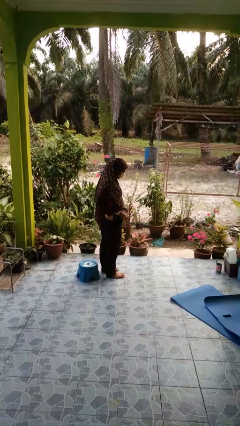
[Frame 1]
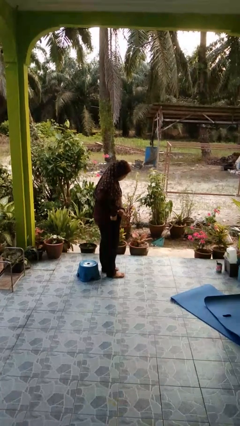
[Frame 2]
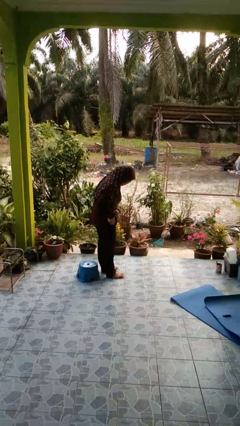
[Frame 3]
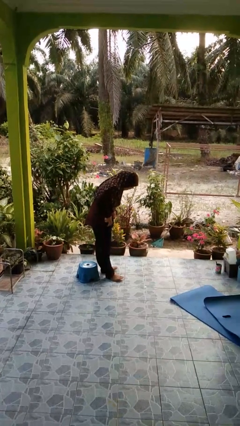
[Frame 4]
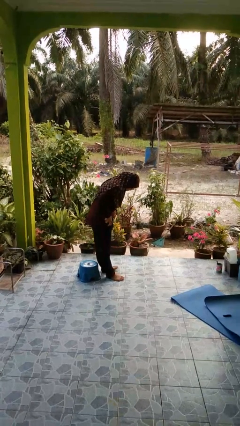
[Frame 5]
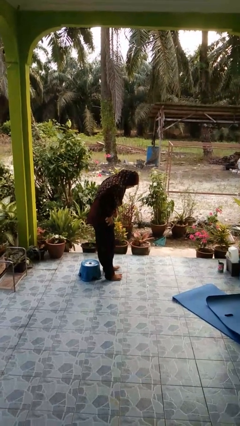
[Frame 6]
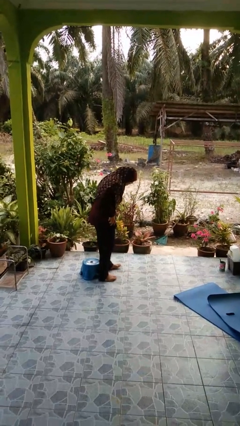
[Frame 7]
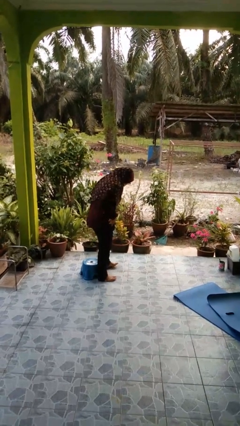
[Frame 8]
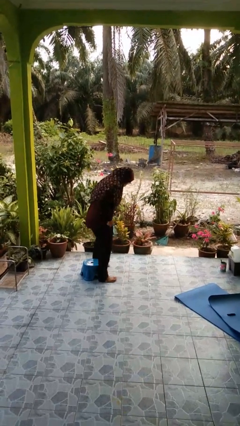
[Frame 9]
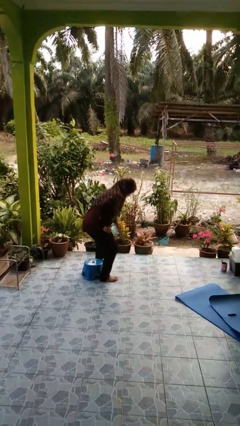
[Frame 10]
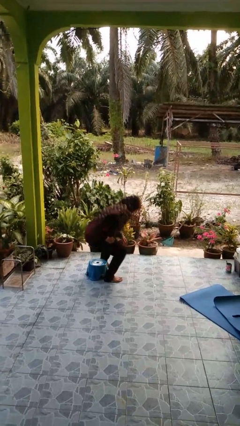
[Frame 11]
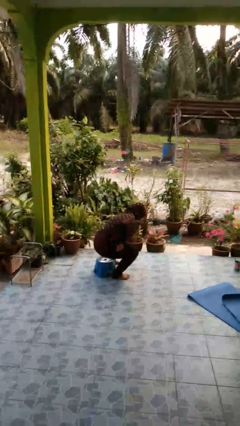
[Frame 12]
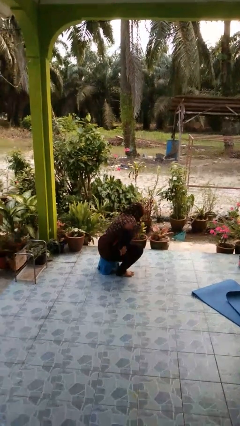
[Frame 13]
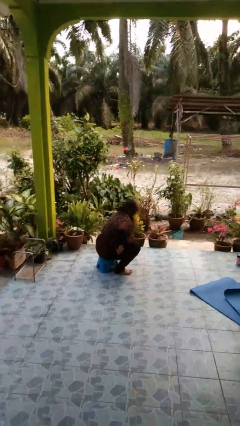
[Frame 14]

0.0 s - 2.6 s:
person puts phone into pocket

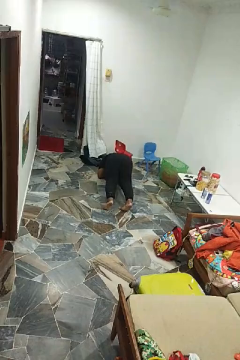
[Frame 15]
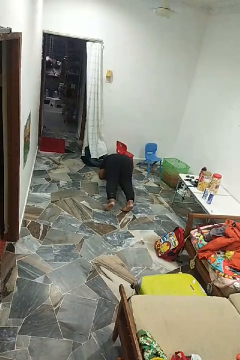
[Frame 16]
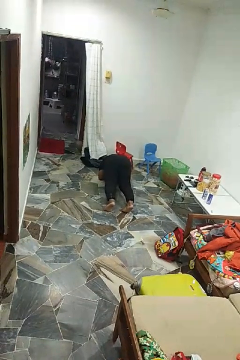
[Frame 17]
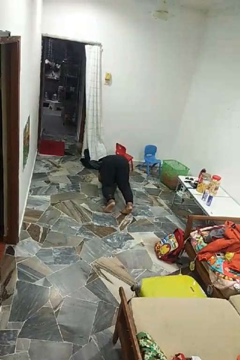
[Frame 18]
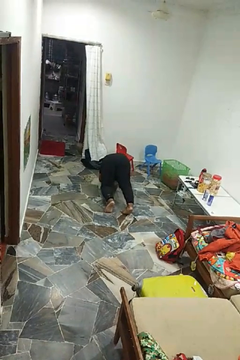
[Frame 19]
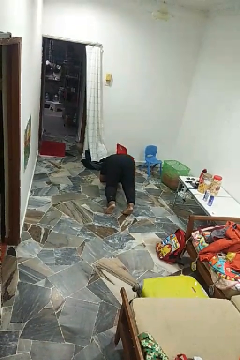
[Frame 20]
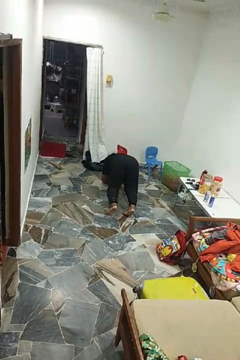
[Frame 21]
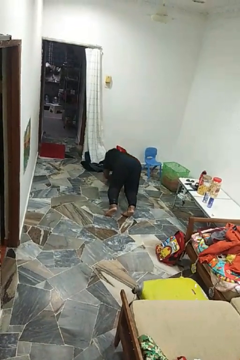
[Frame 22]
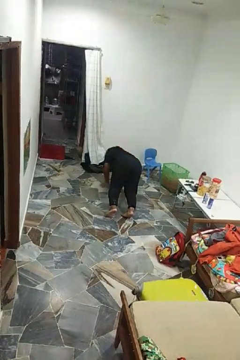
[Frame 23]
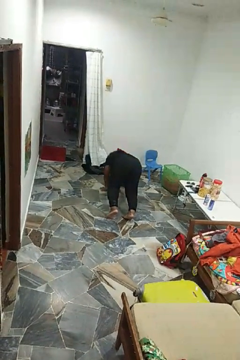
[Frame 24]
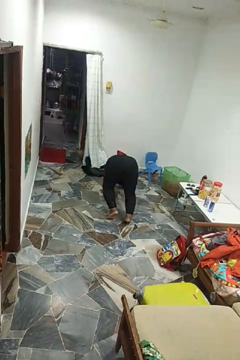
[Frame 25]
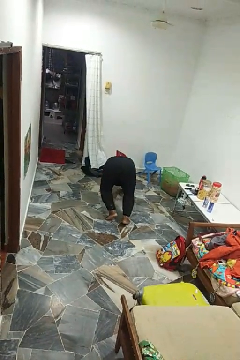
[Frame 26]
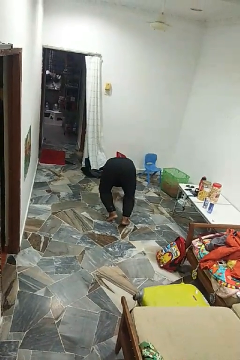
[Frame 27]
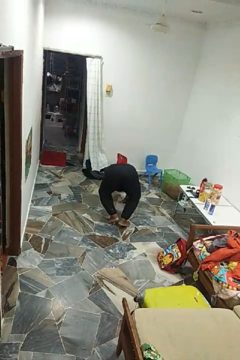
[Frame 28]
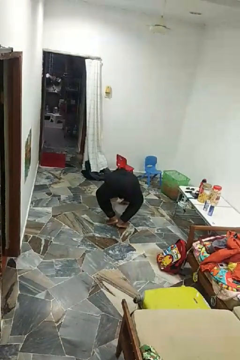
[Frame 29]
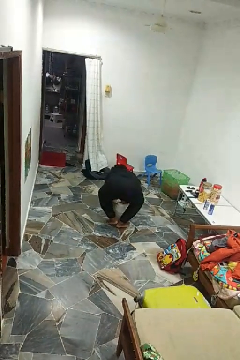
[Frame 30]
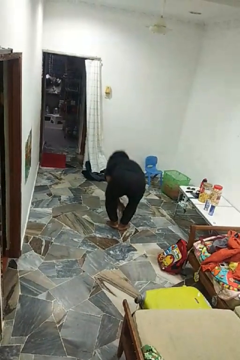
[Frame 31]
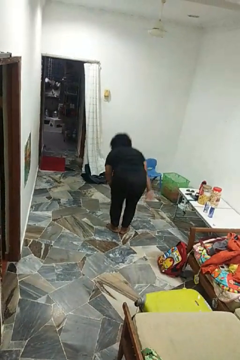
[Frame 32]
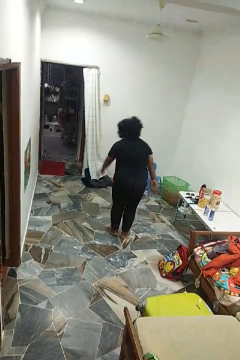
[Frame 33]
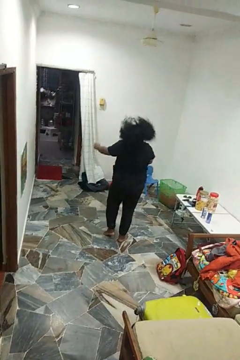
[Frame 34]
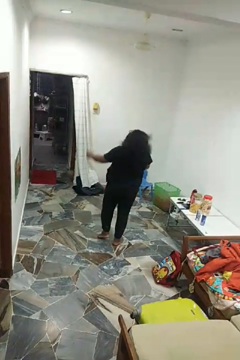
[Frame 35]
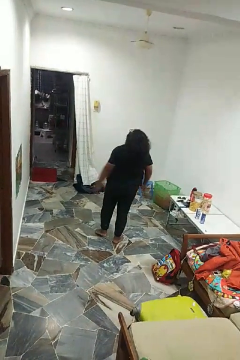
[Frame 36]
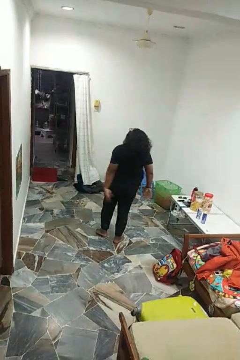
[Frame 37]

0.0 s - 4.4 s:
person stands up from floor

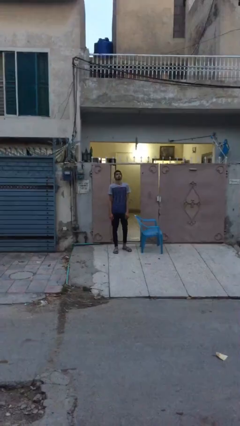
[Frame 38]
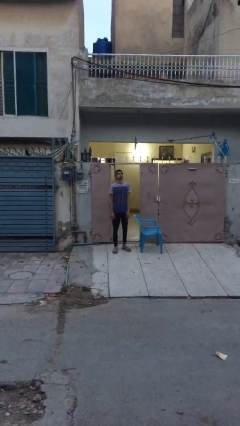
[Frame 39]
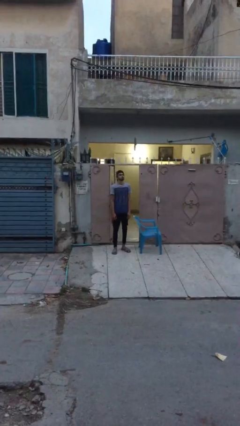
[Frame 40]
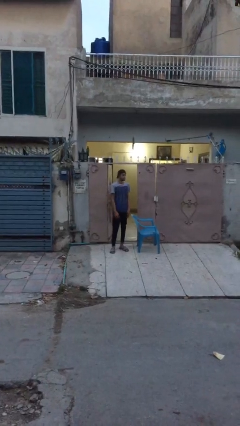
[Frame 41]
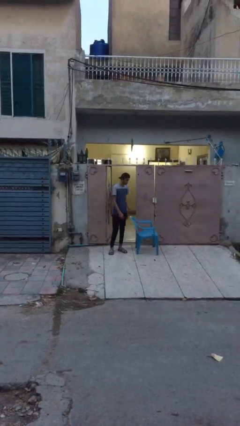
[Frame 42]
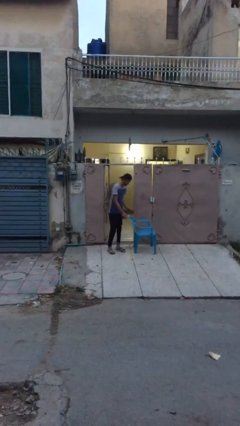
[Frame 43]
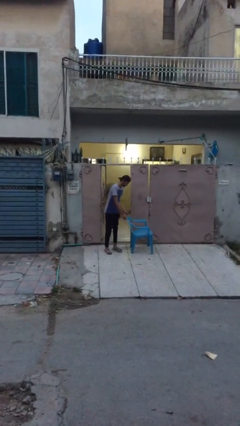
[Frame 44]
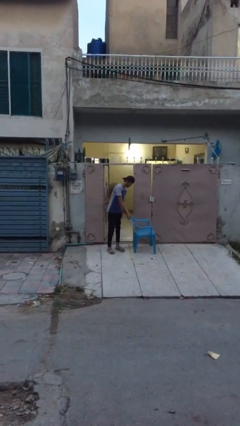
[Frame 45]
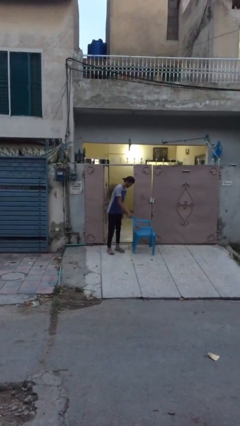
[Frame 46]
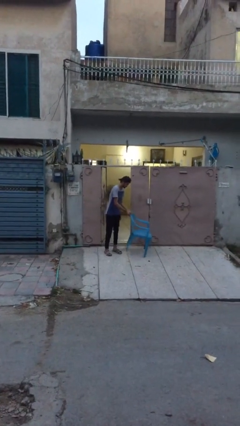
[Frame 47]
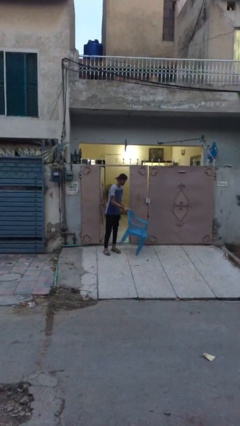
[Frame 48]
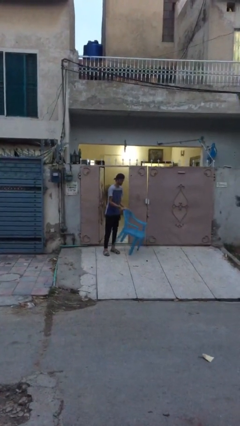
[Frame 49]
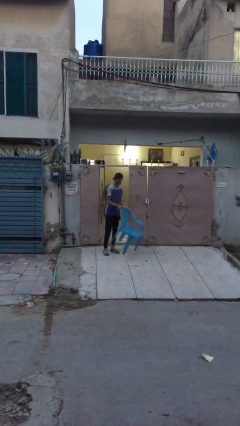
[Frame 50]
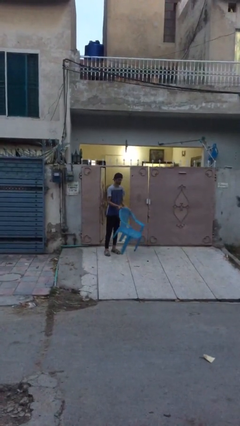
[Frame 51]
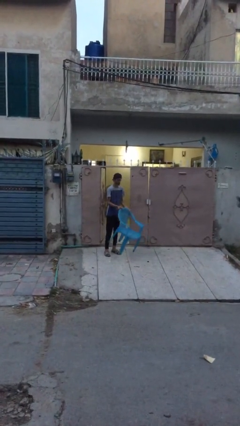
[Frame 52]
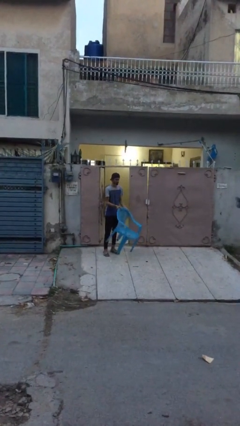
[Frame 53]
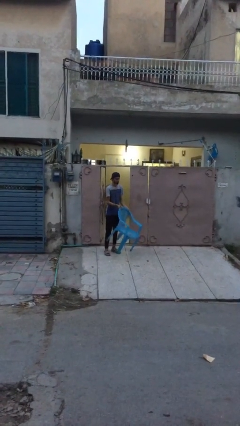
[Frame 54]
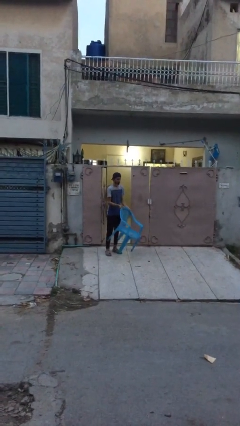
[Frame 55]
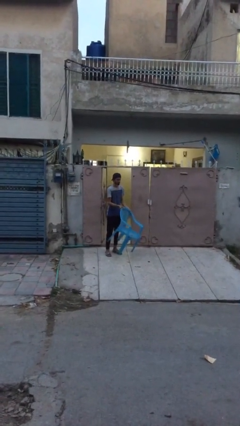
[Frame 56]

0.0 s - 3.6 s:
person picks up object from floor

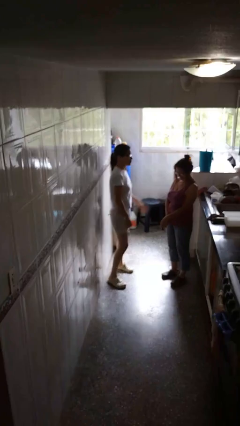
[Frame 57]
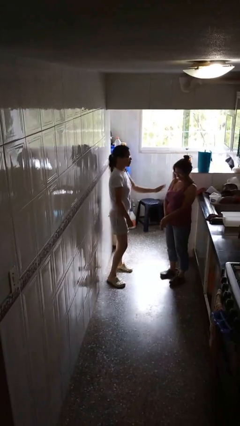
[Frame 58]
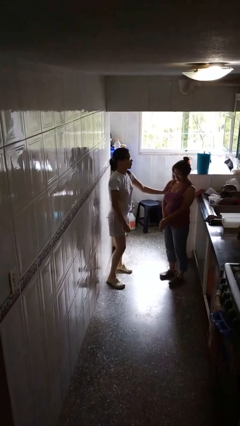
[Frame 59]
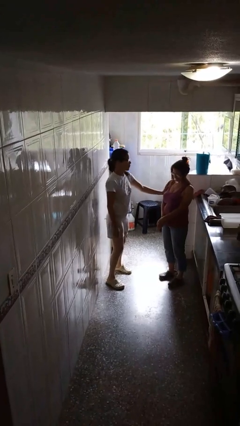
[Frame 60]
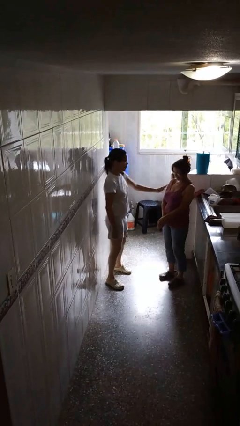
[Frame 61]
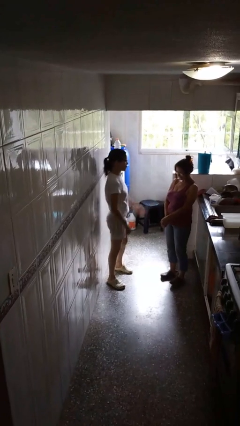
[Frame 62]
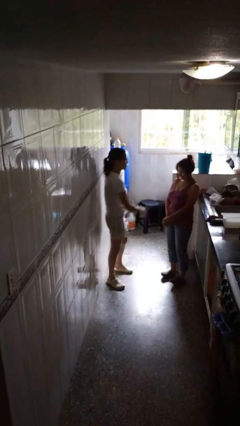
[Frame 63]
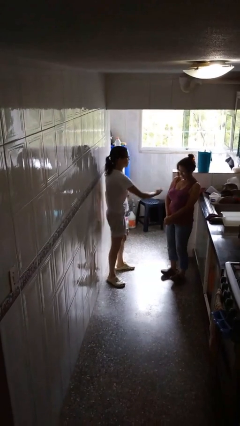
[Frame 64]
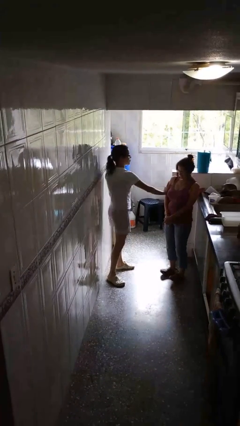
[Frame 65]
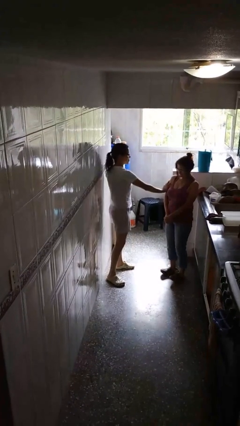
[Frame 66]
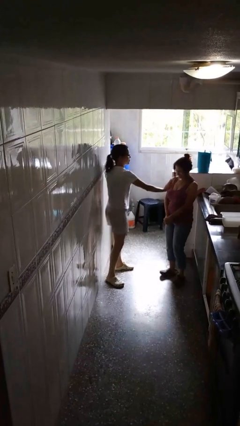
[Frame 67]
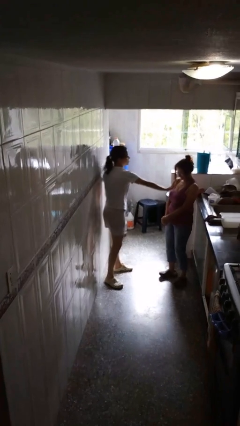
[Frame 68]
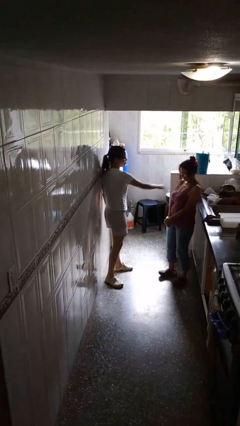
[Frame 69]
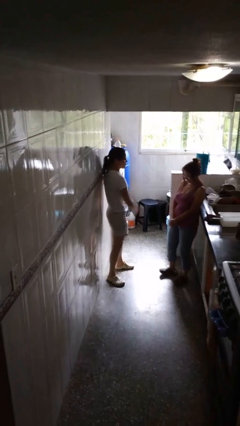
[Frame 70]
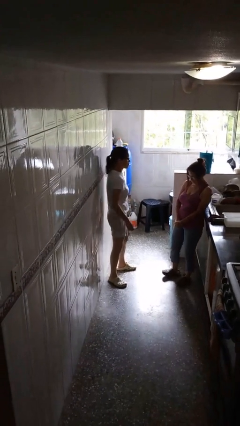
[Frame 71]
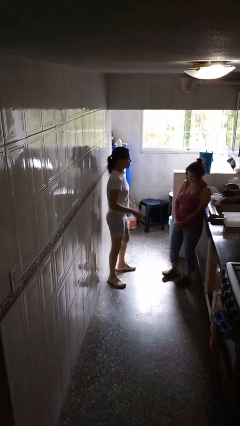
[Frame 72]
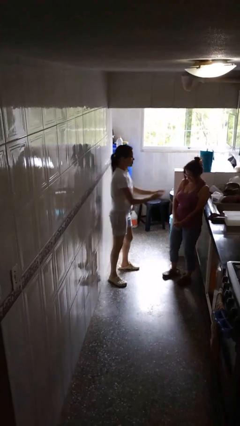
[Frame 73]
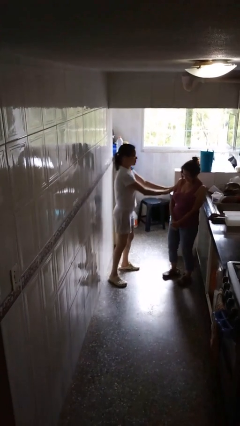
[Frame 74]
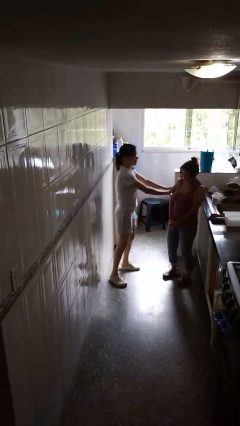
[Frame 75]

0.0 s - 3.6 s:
person shoves person

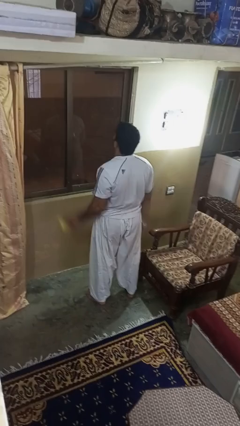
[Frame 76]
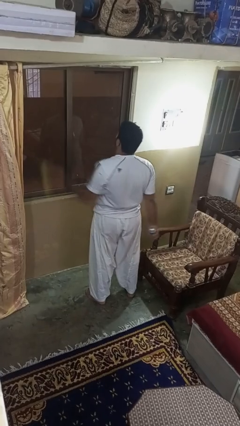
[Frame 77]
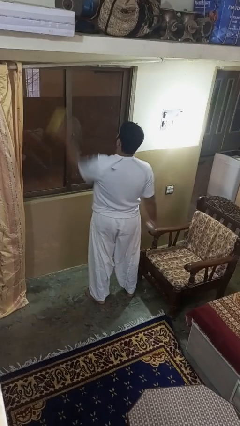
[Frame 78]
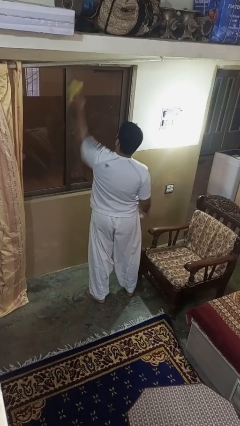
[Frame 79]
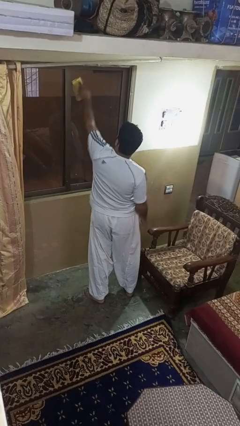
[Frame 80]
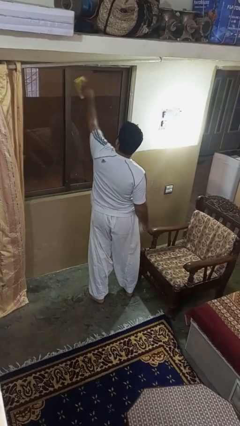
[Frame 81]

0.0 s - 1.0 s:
person washes window

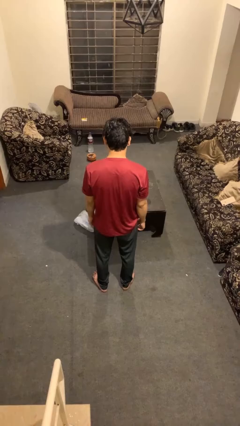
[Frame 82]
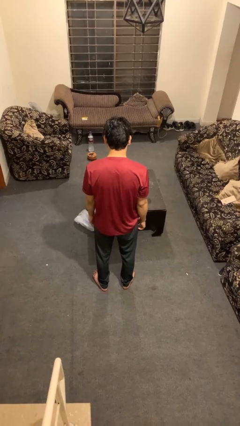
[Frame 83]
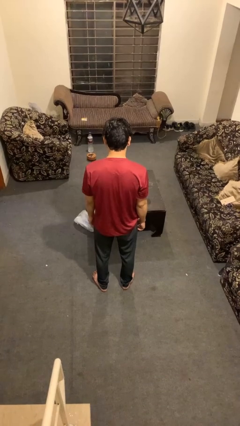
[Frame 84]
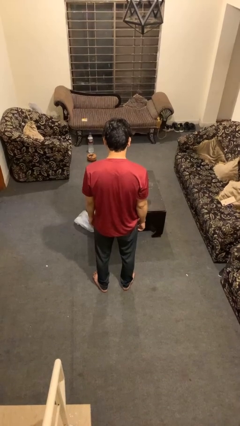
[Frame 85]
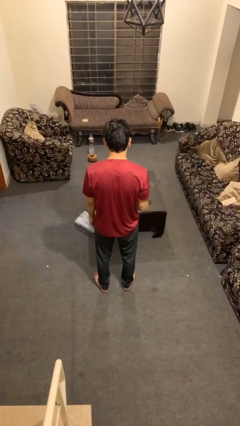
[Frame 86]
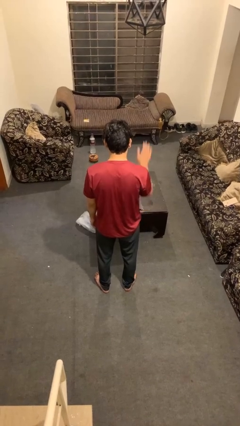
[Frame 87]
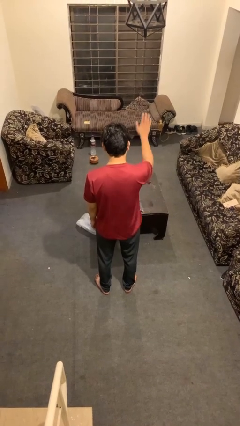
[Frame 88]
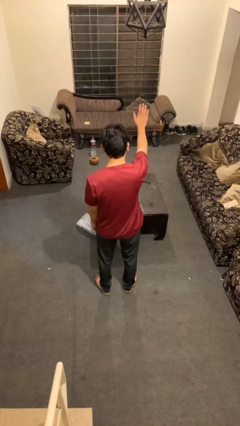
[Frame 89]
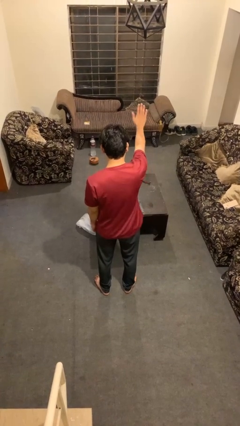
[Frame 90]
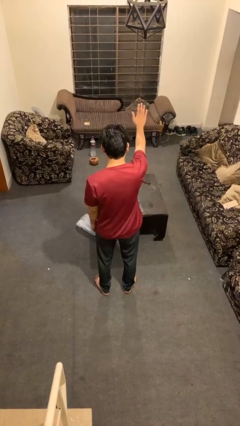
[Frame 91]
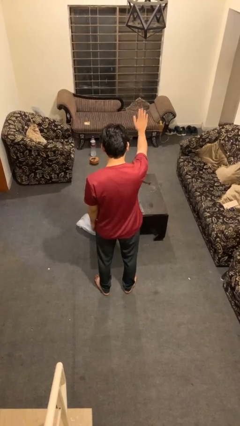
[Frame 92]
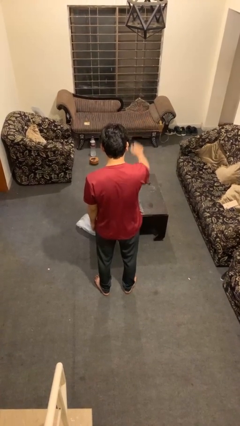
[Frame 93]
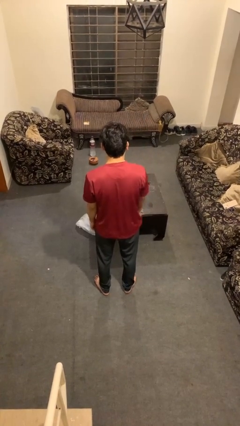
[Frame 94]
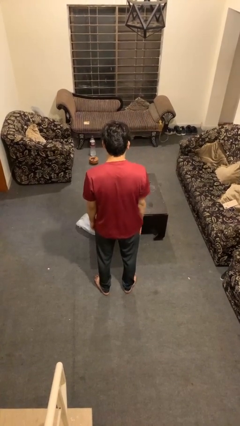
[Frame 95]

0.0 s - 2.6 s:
person gestures stop

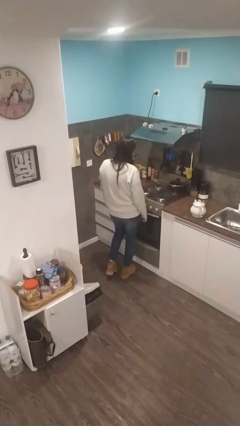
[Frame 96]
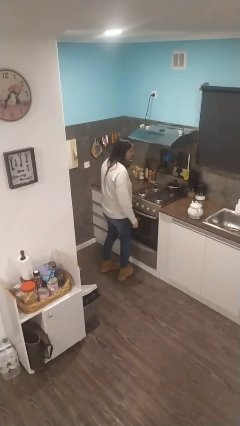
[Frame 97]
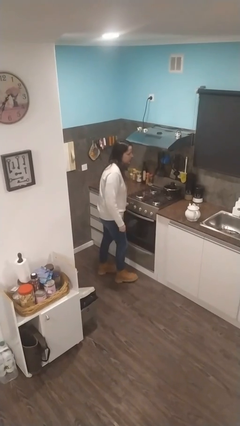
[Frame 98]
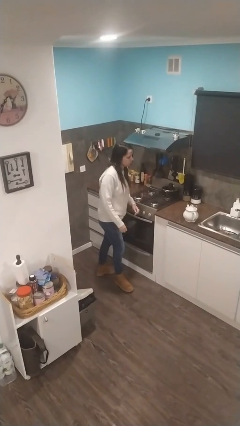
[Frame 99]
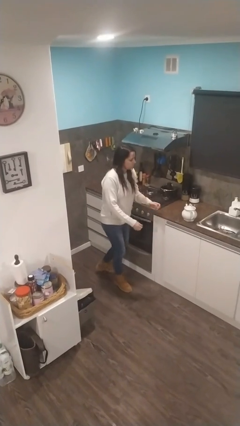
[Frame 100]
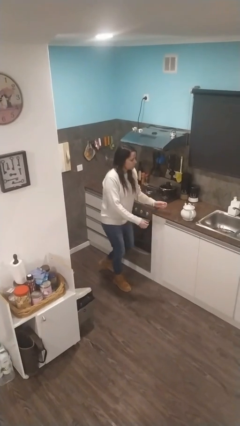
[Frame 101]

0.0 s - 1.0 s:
person puts down object on countertop
